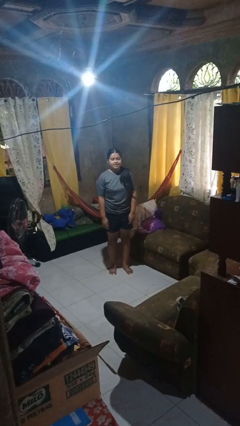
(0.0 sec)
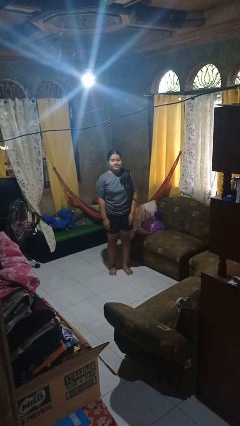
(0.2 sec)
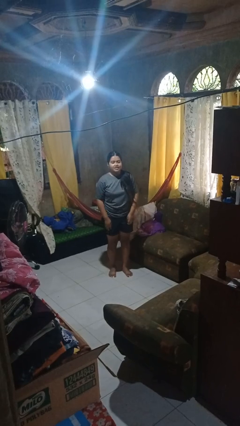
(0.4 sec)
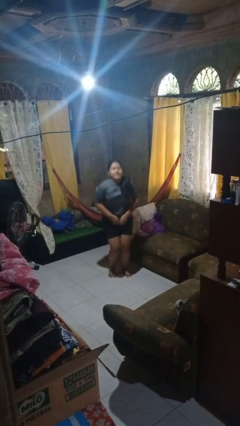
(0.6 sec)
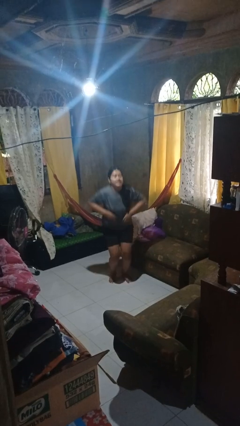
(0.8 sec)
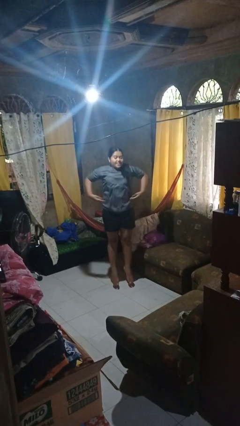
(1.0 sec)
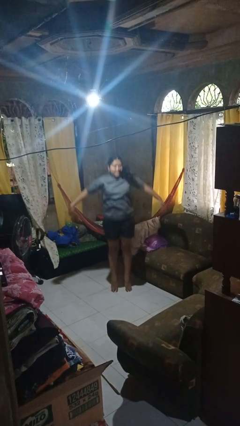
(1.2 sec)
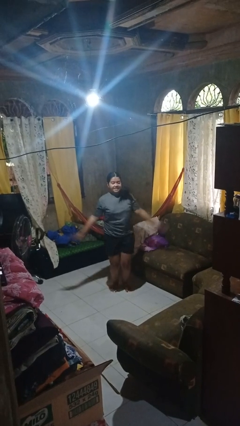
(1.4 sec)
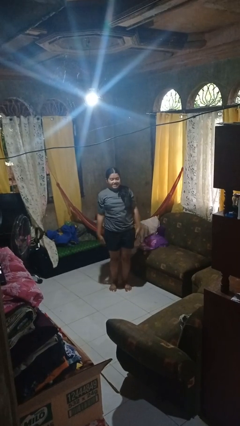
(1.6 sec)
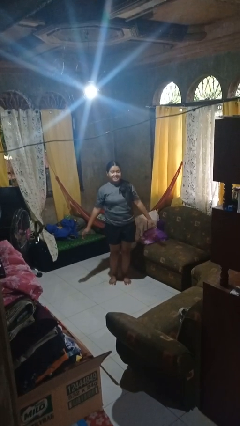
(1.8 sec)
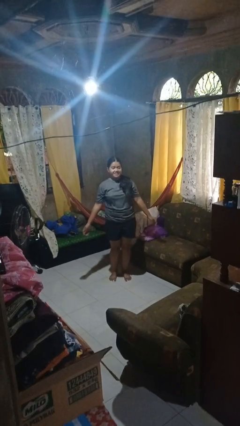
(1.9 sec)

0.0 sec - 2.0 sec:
person jumps

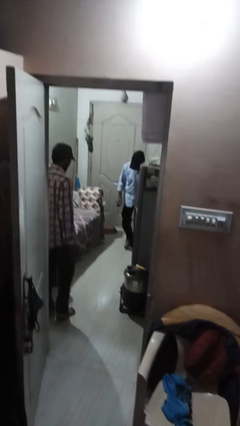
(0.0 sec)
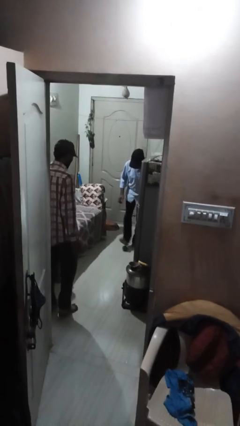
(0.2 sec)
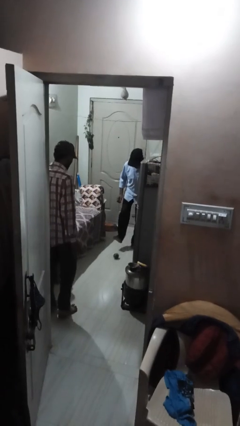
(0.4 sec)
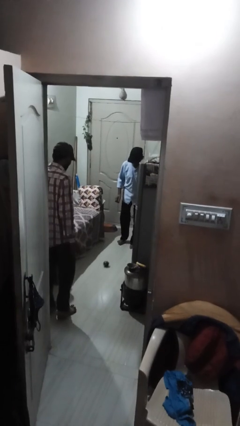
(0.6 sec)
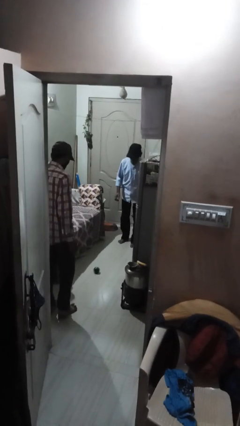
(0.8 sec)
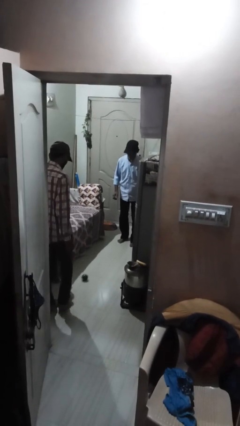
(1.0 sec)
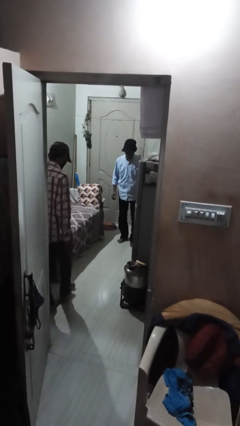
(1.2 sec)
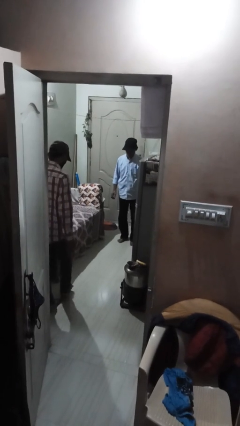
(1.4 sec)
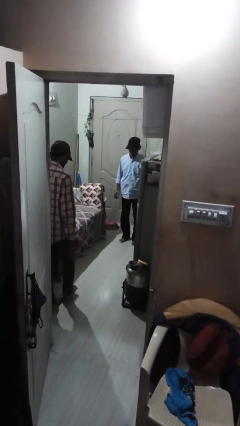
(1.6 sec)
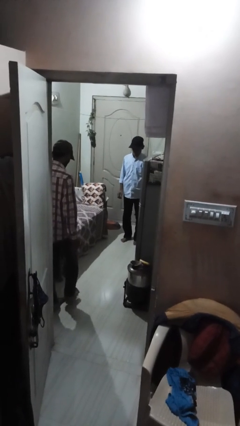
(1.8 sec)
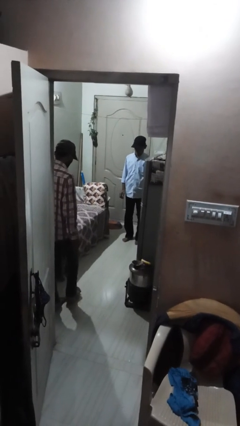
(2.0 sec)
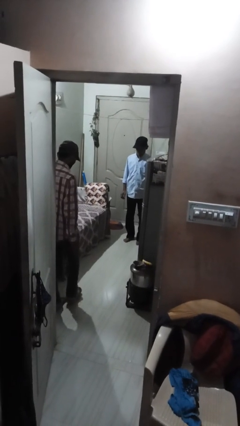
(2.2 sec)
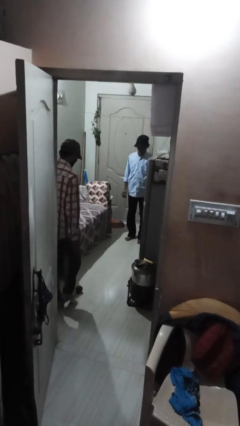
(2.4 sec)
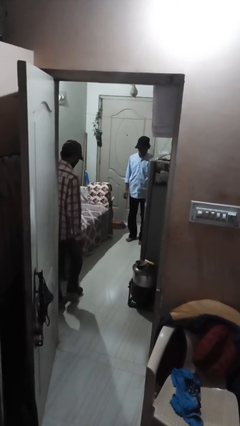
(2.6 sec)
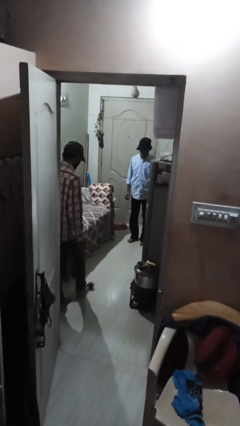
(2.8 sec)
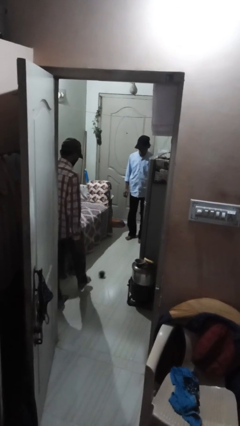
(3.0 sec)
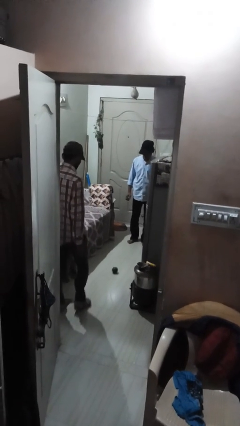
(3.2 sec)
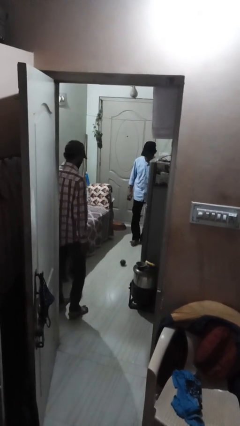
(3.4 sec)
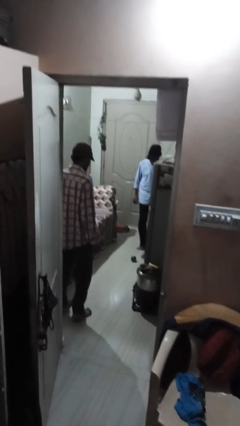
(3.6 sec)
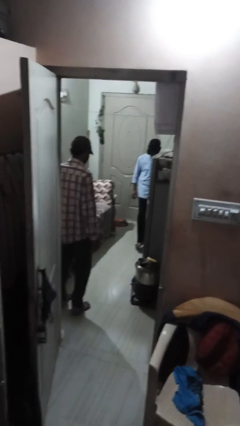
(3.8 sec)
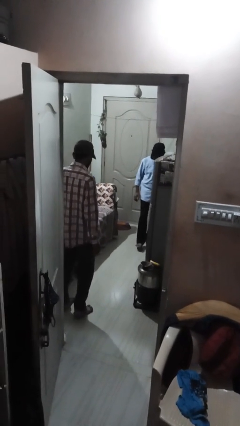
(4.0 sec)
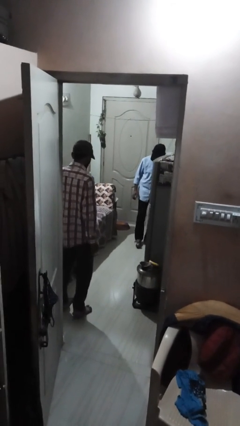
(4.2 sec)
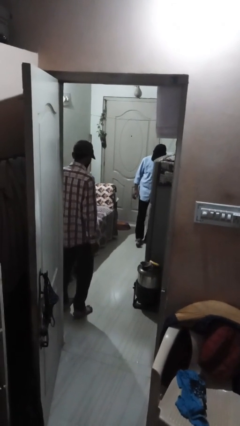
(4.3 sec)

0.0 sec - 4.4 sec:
person kicks object to person

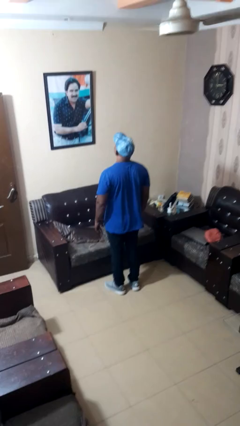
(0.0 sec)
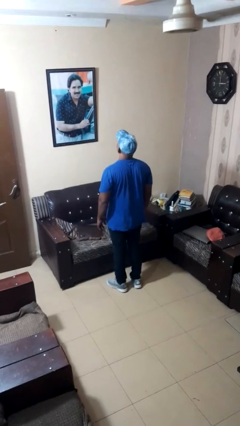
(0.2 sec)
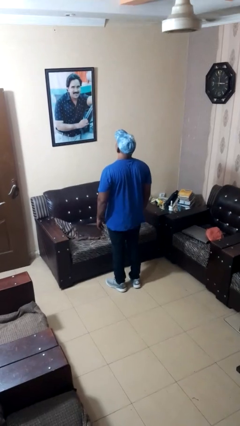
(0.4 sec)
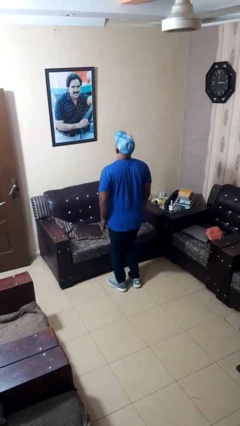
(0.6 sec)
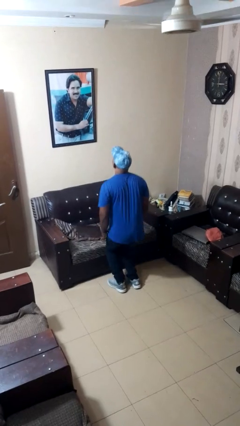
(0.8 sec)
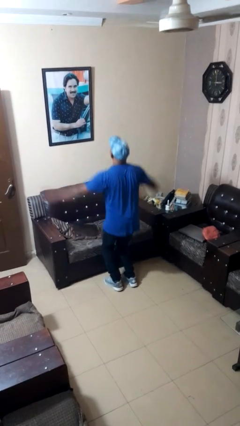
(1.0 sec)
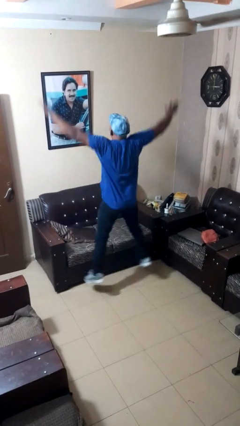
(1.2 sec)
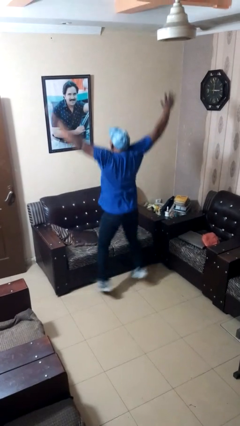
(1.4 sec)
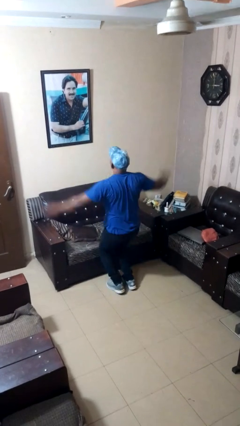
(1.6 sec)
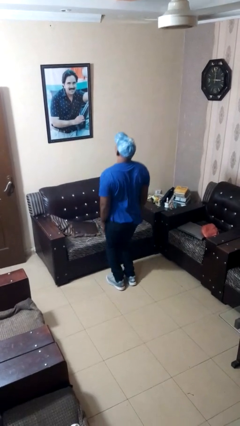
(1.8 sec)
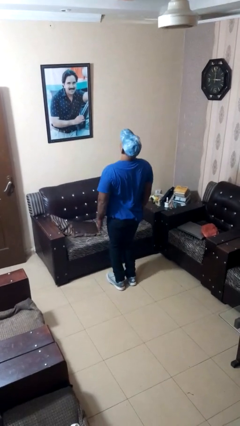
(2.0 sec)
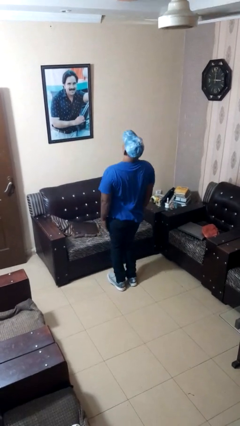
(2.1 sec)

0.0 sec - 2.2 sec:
person exercises with jumping jacks

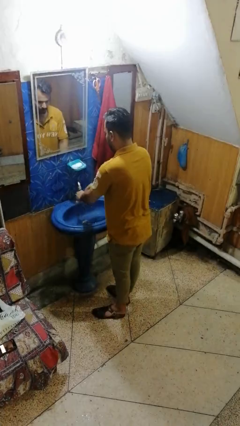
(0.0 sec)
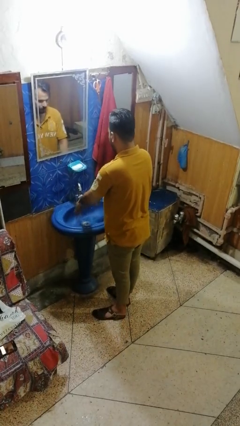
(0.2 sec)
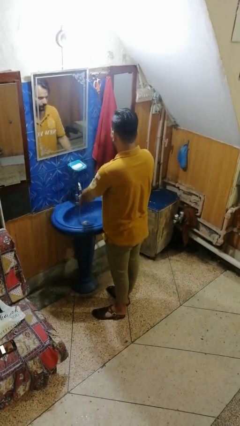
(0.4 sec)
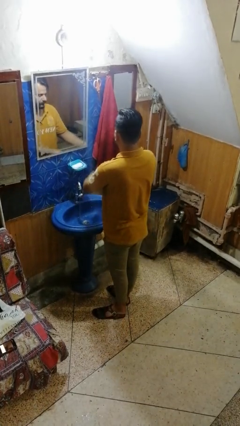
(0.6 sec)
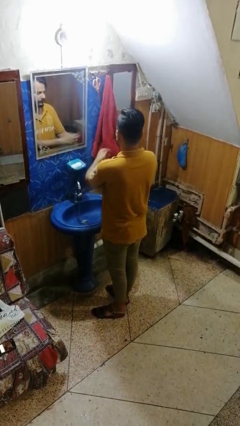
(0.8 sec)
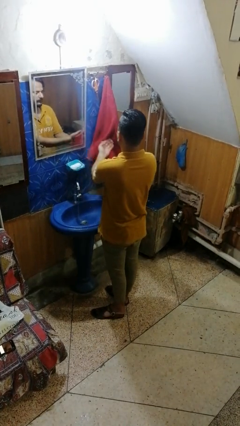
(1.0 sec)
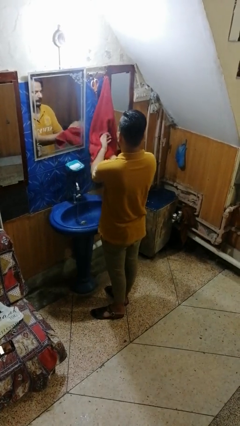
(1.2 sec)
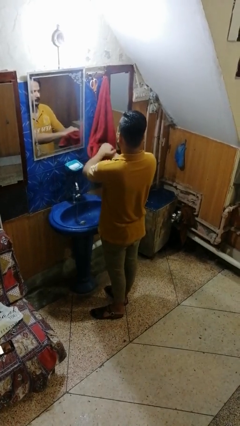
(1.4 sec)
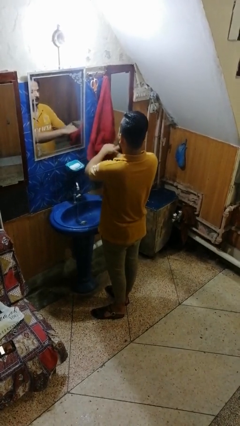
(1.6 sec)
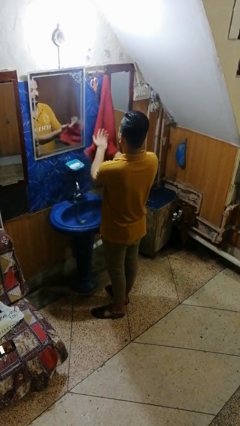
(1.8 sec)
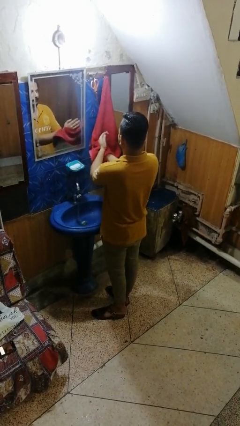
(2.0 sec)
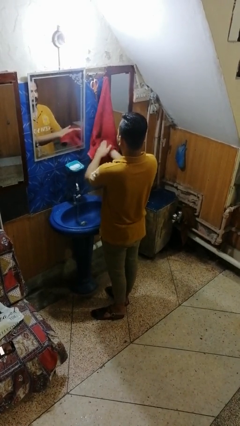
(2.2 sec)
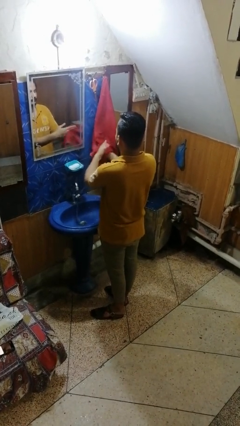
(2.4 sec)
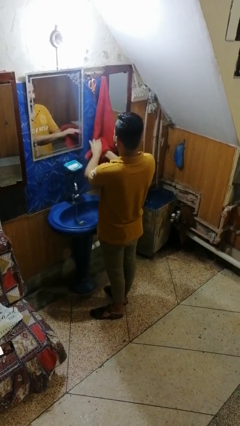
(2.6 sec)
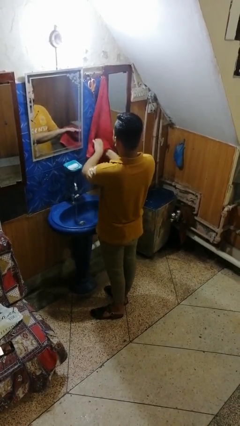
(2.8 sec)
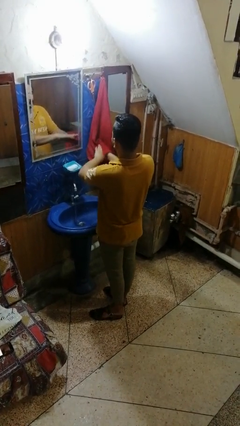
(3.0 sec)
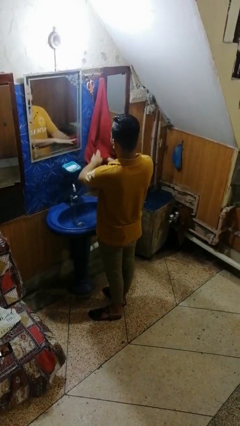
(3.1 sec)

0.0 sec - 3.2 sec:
person dries hands with towel

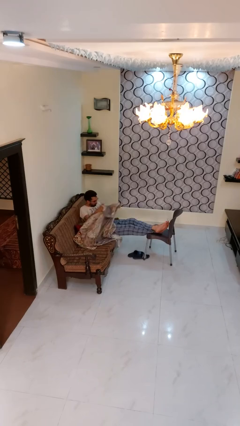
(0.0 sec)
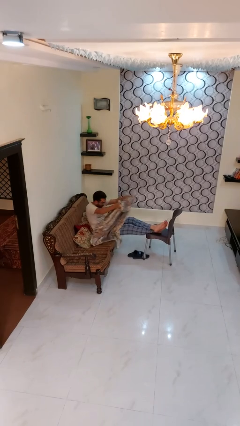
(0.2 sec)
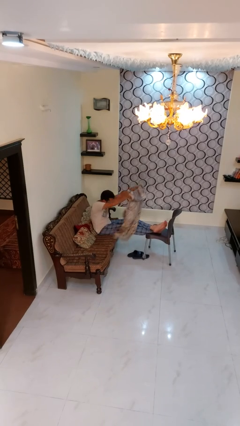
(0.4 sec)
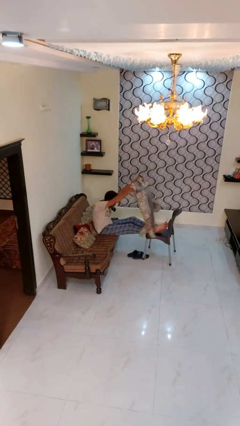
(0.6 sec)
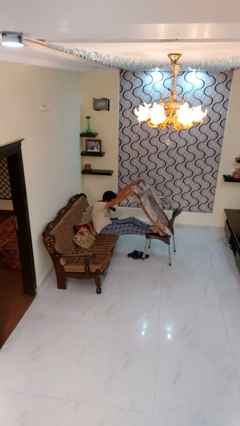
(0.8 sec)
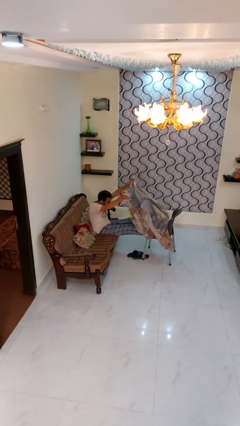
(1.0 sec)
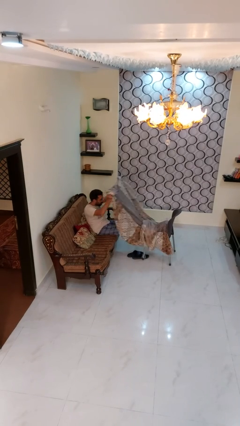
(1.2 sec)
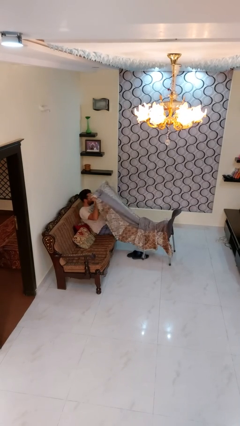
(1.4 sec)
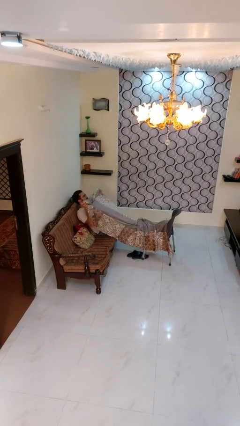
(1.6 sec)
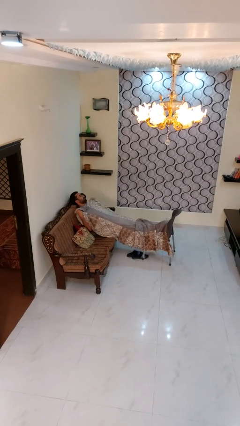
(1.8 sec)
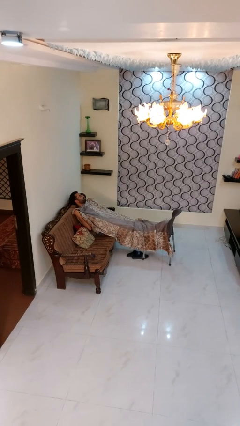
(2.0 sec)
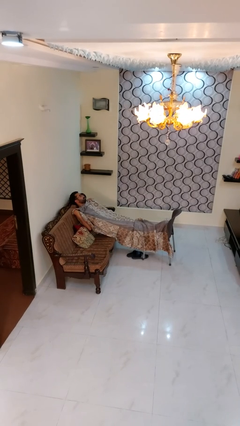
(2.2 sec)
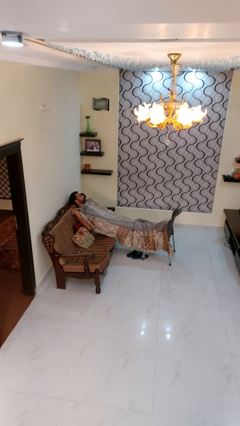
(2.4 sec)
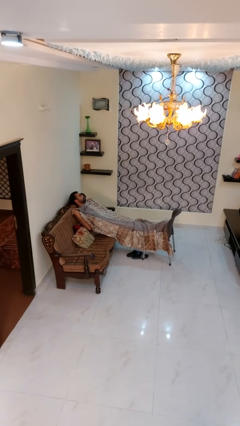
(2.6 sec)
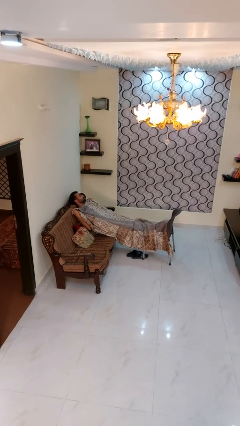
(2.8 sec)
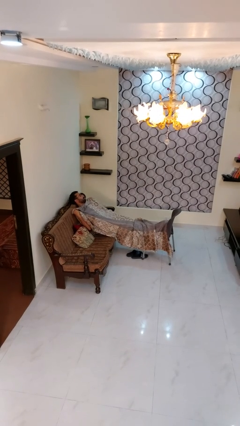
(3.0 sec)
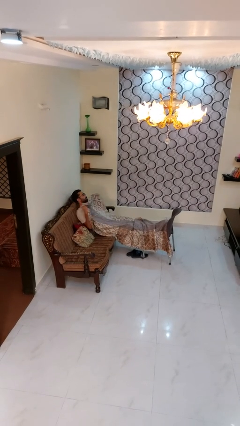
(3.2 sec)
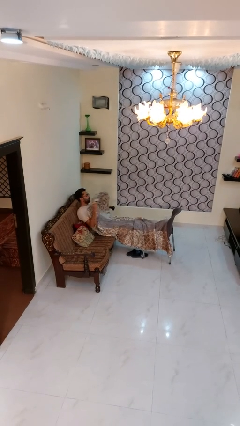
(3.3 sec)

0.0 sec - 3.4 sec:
person covers with blanket

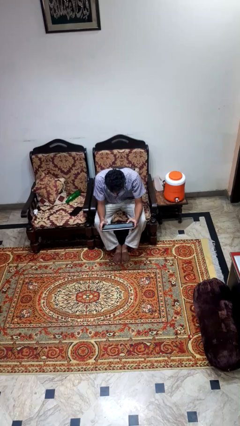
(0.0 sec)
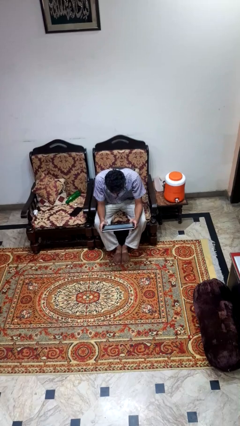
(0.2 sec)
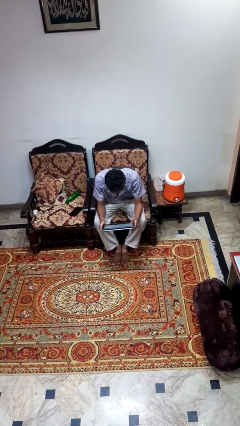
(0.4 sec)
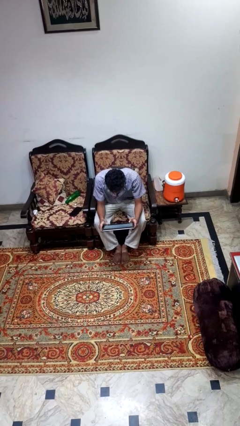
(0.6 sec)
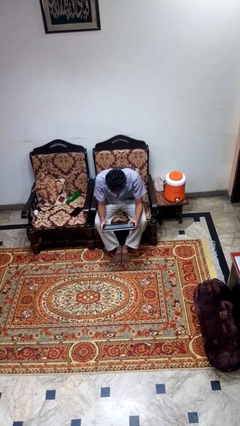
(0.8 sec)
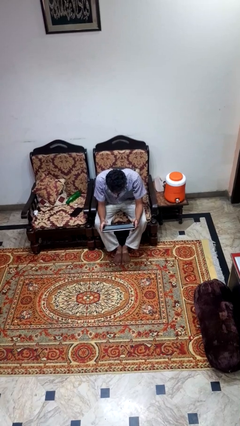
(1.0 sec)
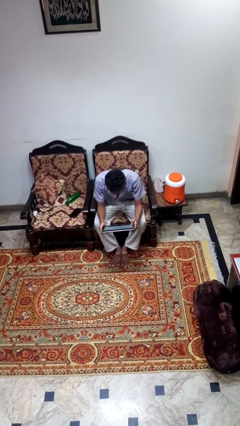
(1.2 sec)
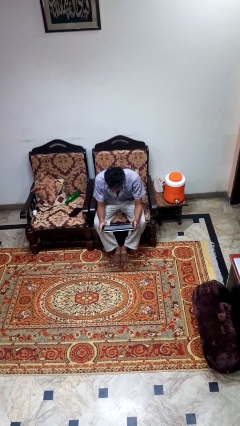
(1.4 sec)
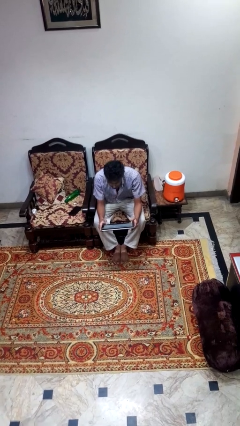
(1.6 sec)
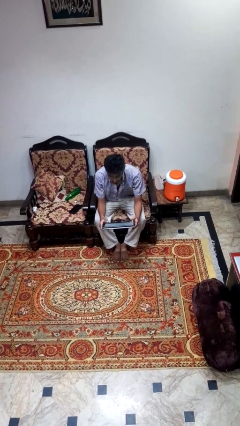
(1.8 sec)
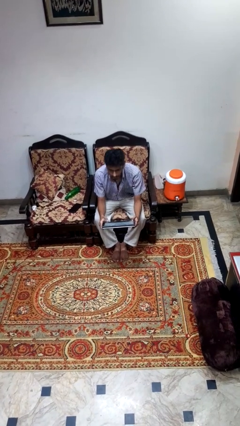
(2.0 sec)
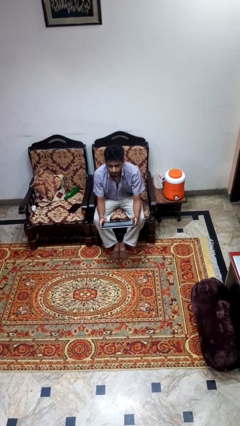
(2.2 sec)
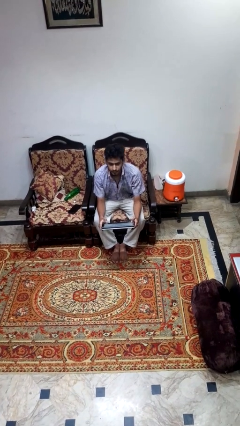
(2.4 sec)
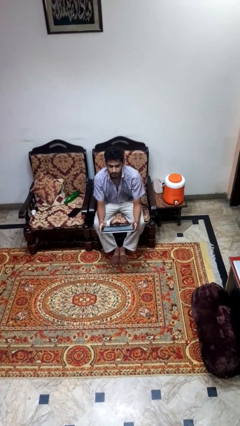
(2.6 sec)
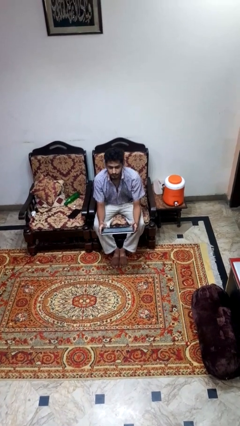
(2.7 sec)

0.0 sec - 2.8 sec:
person reads newspaper
